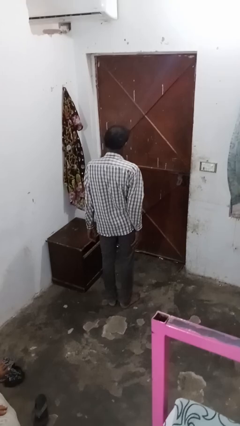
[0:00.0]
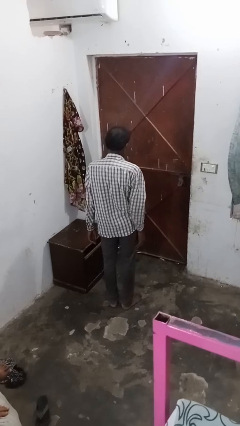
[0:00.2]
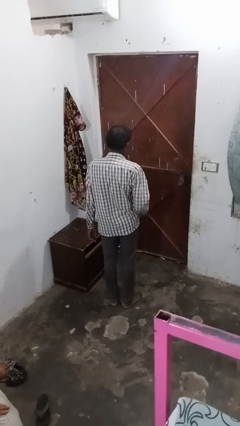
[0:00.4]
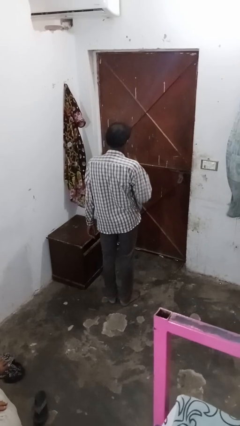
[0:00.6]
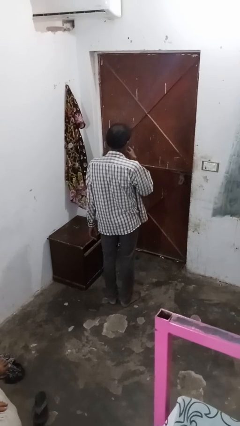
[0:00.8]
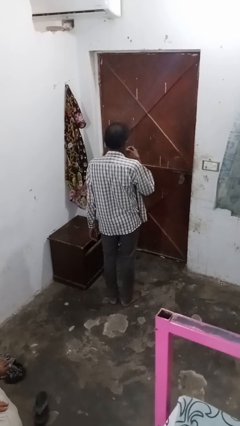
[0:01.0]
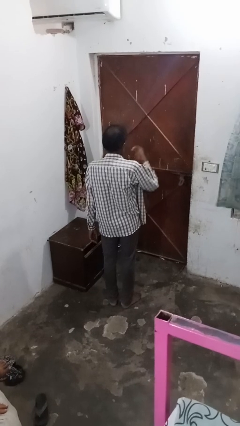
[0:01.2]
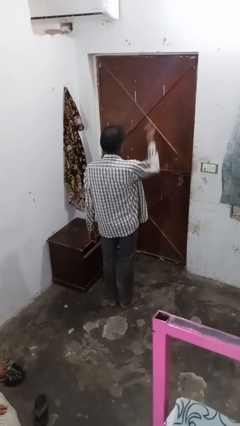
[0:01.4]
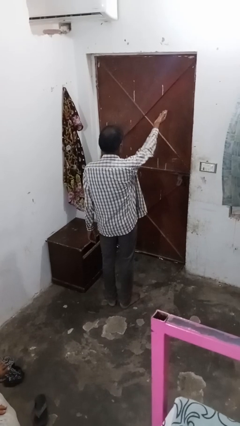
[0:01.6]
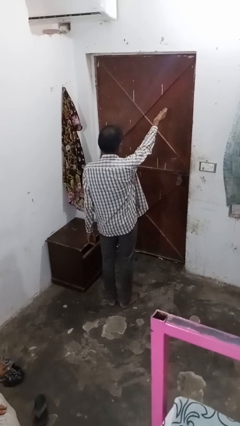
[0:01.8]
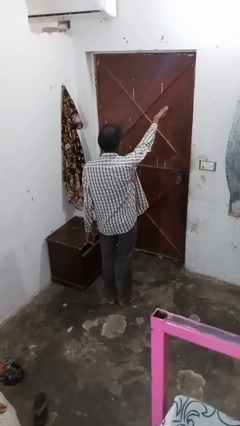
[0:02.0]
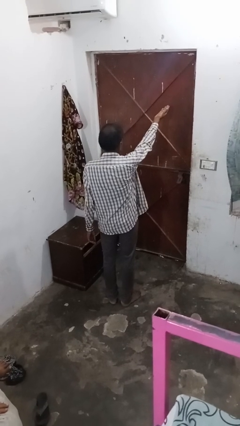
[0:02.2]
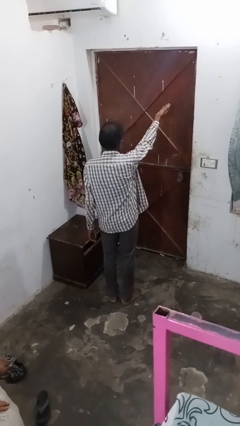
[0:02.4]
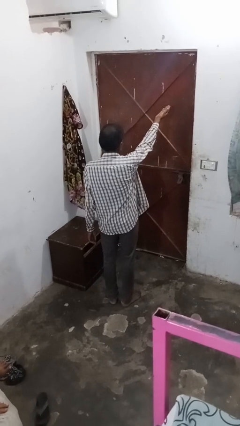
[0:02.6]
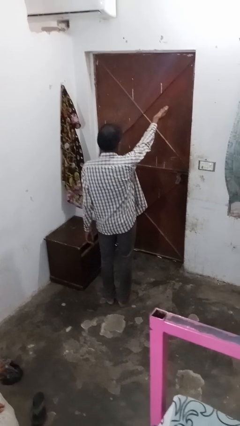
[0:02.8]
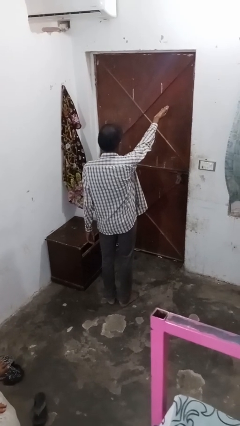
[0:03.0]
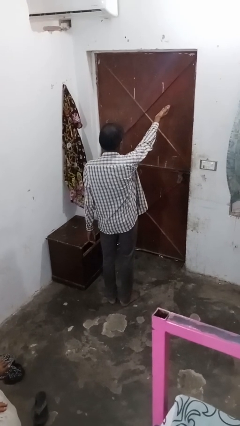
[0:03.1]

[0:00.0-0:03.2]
person gestures blow kiss

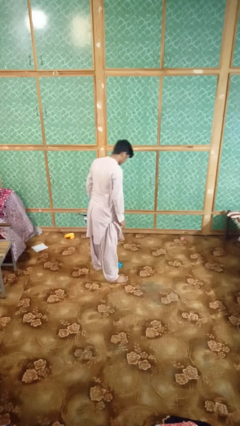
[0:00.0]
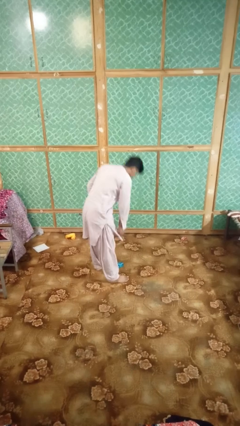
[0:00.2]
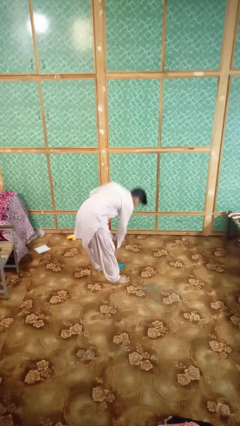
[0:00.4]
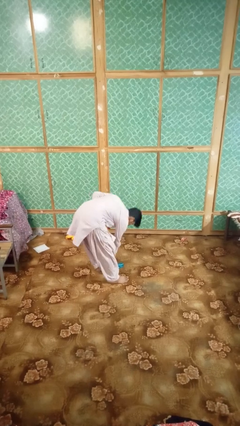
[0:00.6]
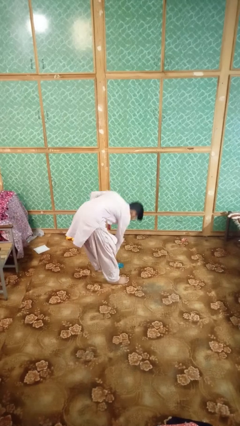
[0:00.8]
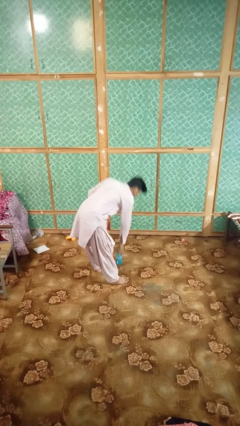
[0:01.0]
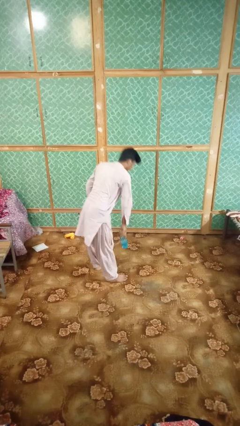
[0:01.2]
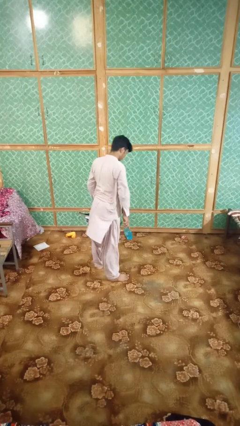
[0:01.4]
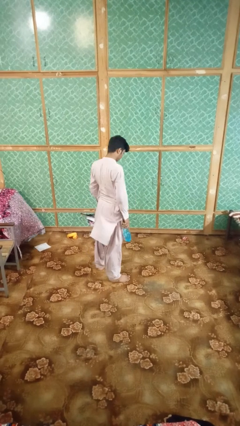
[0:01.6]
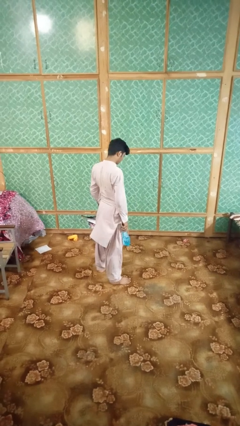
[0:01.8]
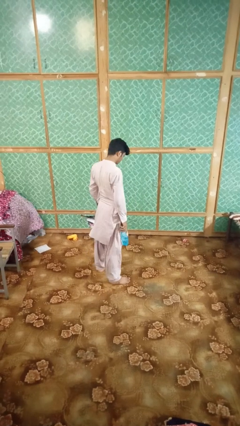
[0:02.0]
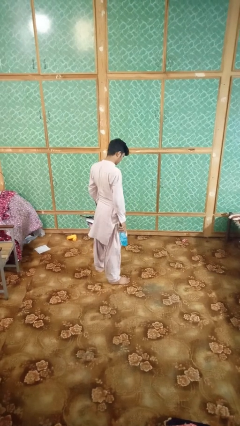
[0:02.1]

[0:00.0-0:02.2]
person picks up object from floor

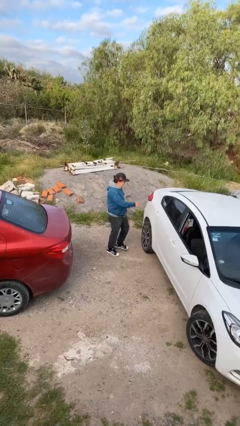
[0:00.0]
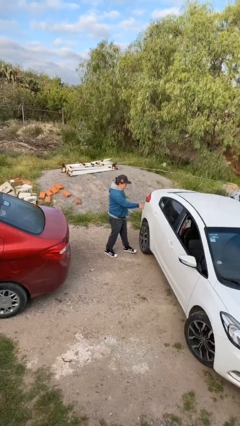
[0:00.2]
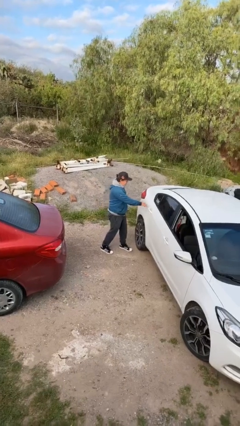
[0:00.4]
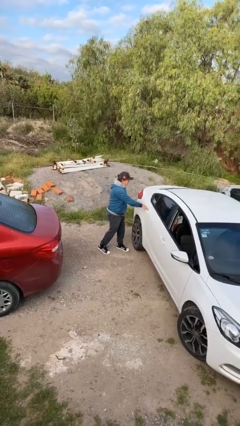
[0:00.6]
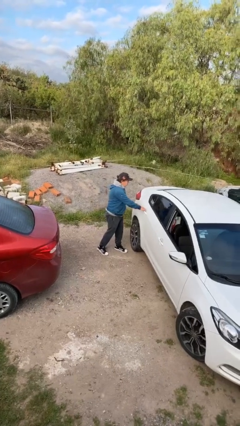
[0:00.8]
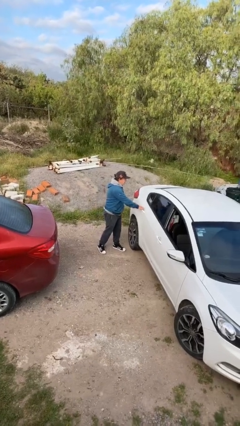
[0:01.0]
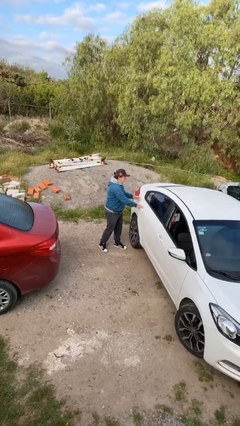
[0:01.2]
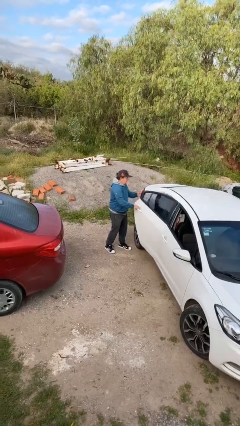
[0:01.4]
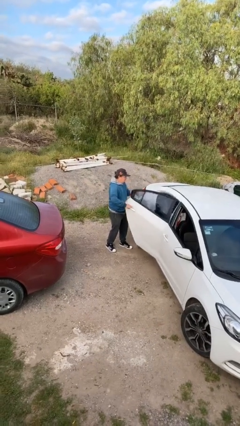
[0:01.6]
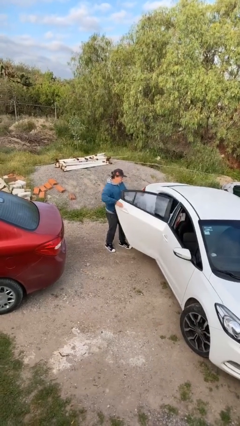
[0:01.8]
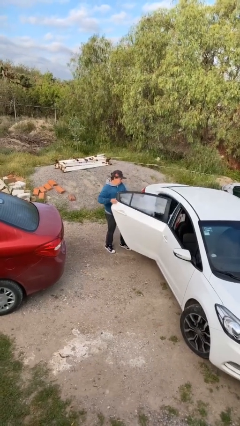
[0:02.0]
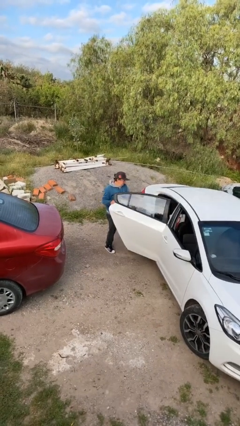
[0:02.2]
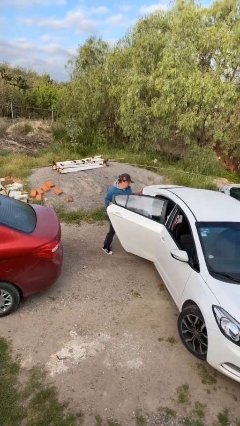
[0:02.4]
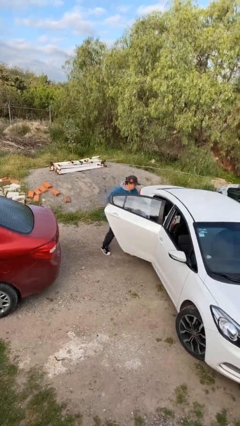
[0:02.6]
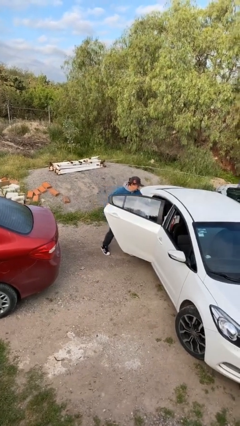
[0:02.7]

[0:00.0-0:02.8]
person opens car door

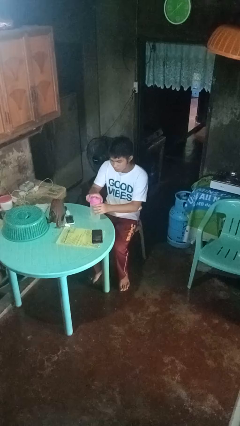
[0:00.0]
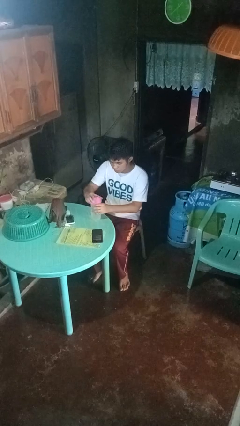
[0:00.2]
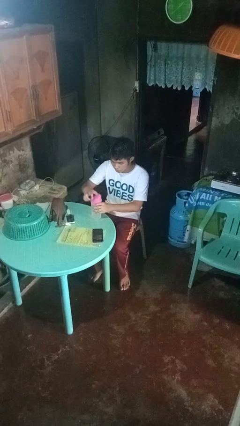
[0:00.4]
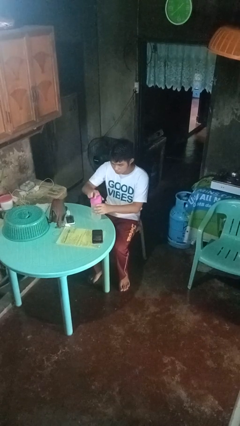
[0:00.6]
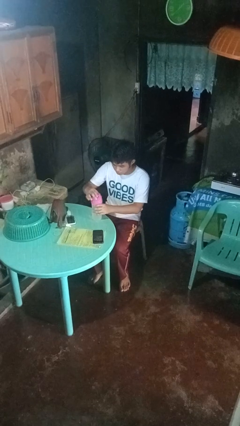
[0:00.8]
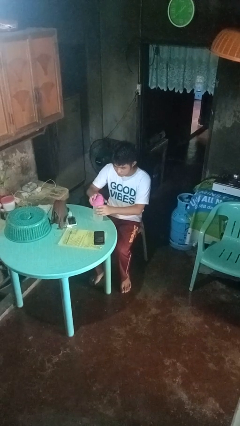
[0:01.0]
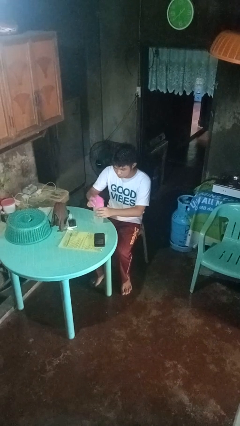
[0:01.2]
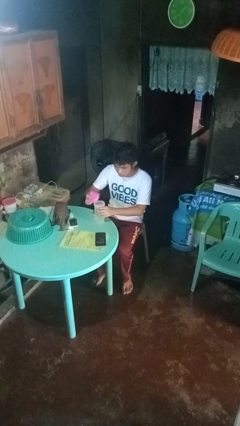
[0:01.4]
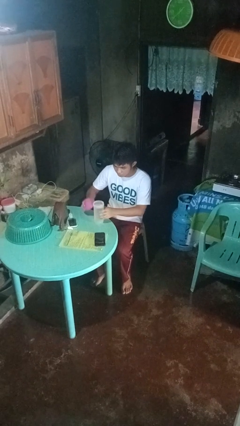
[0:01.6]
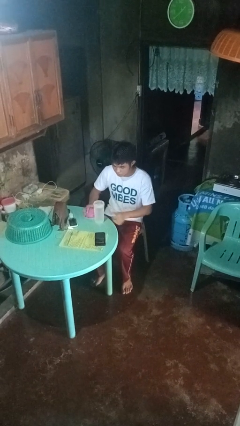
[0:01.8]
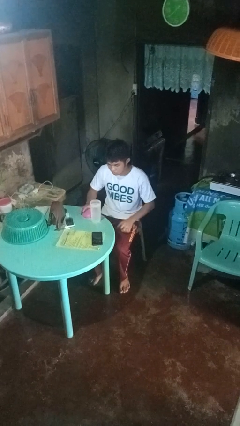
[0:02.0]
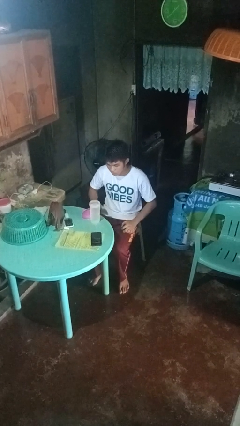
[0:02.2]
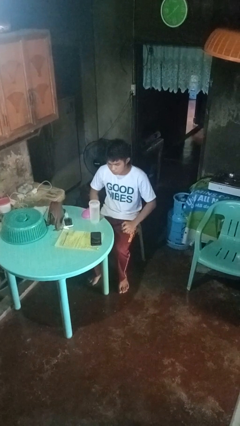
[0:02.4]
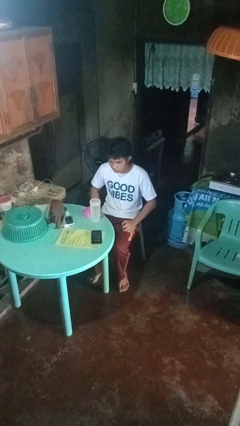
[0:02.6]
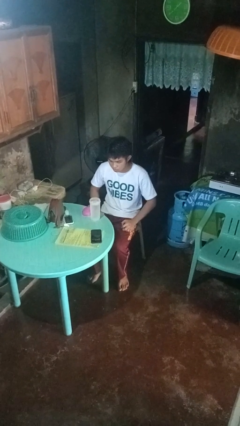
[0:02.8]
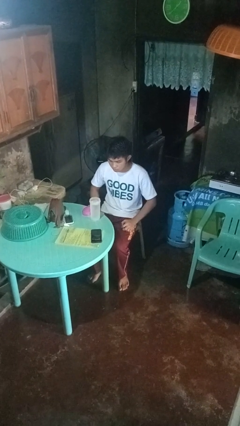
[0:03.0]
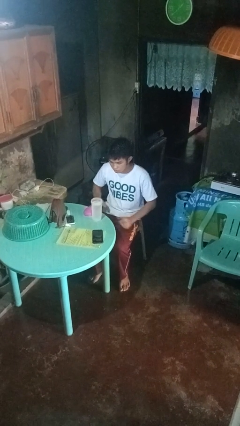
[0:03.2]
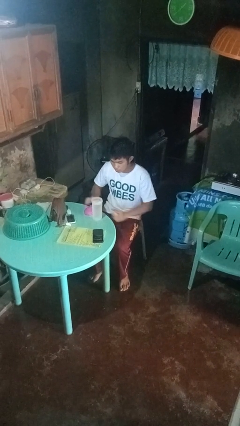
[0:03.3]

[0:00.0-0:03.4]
person unscrews lid from bottle

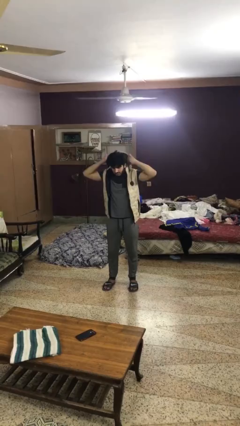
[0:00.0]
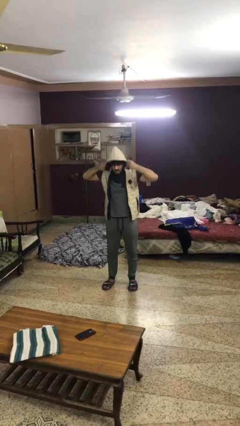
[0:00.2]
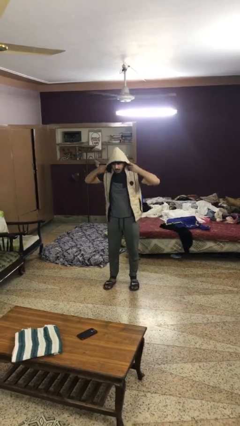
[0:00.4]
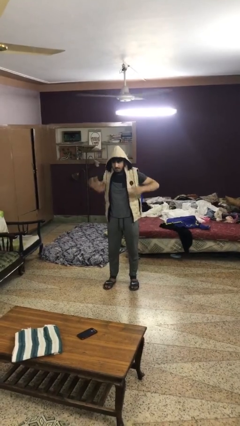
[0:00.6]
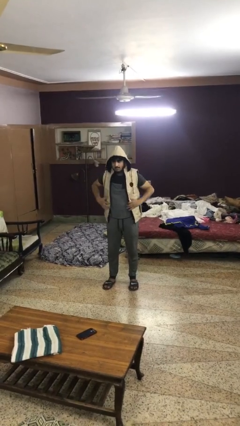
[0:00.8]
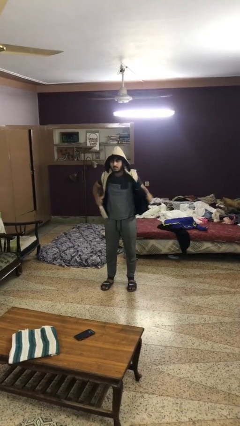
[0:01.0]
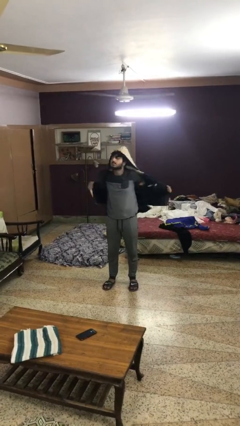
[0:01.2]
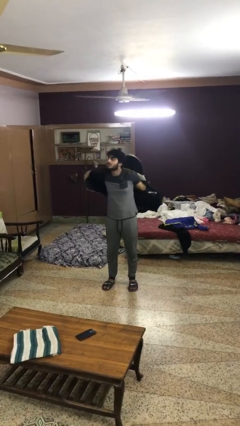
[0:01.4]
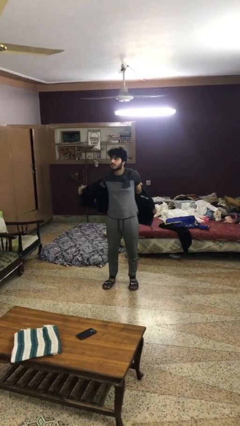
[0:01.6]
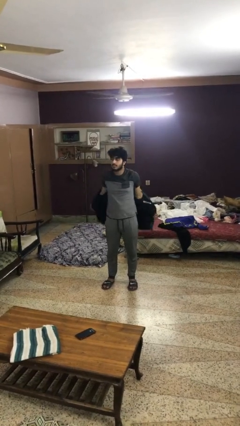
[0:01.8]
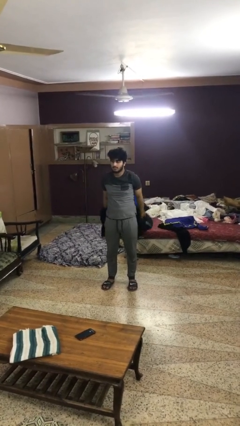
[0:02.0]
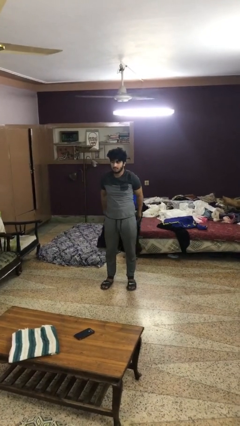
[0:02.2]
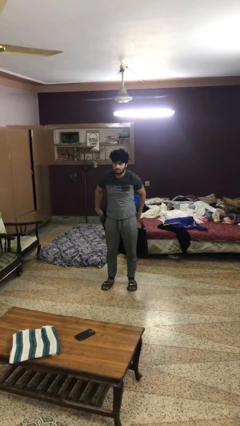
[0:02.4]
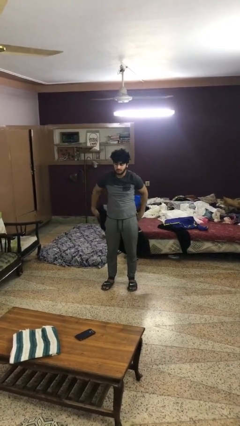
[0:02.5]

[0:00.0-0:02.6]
person takes off hoodie

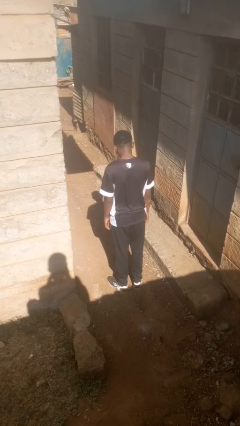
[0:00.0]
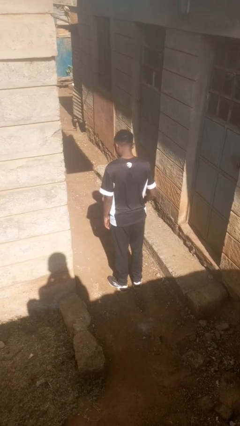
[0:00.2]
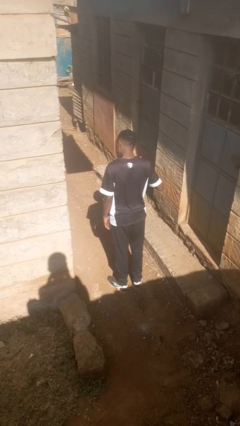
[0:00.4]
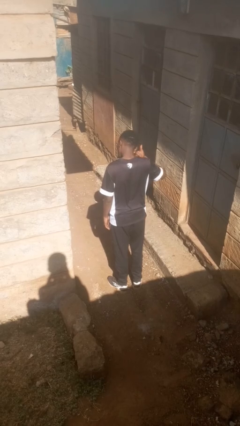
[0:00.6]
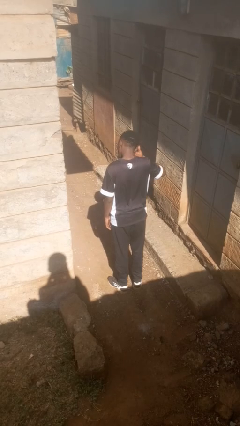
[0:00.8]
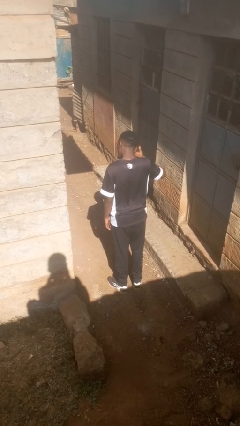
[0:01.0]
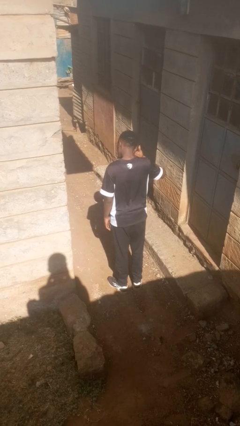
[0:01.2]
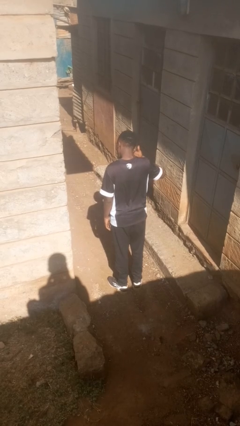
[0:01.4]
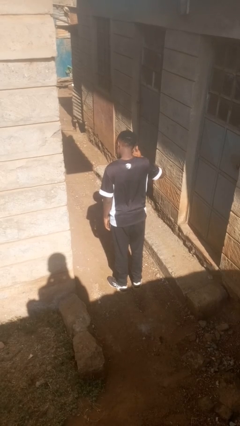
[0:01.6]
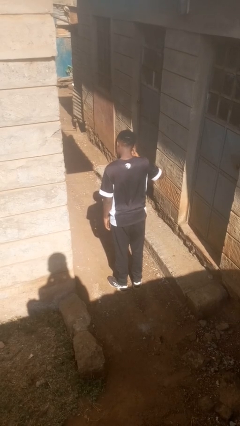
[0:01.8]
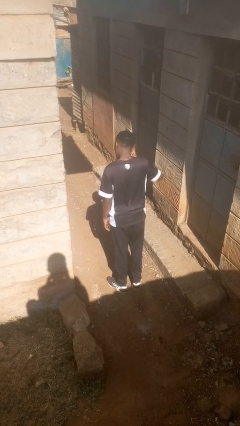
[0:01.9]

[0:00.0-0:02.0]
person gestures call me

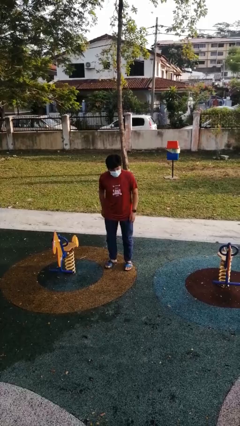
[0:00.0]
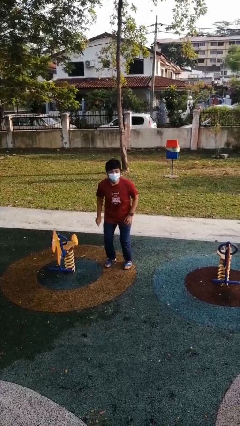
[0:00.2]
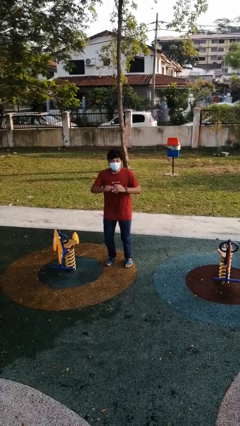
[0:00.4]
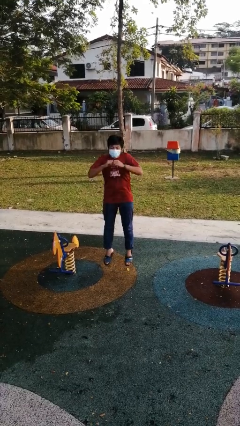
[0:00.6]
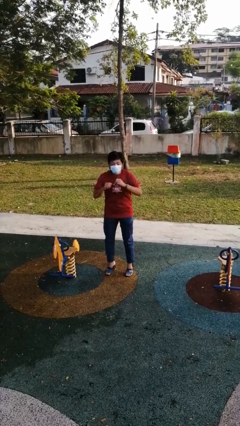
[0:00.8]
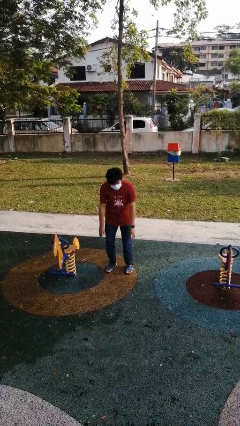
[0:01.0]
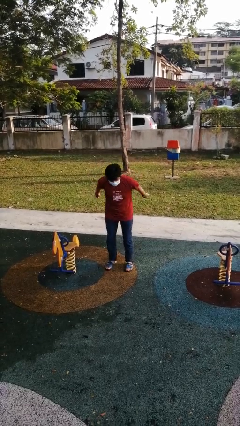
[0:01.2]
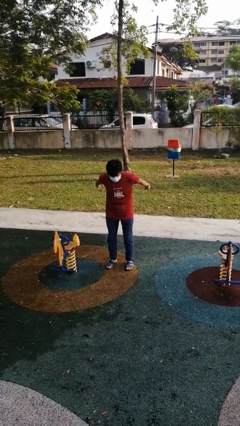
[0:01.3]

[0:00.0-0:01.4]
person jumps
